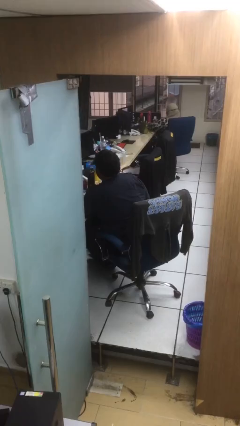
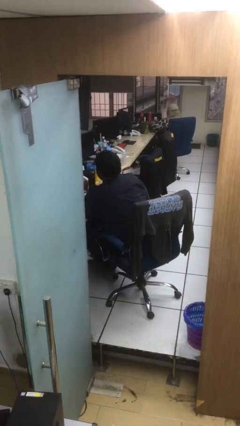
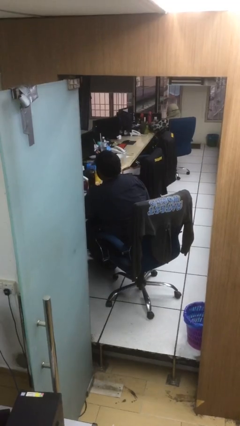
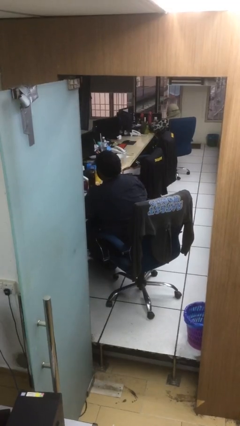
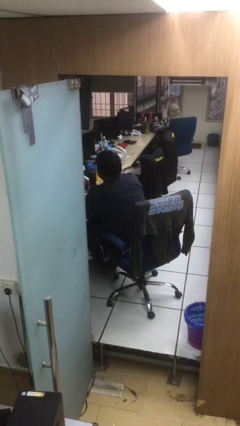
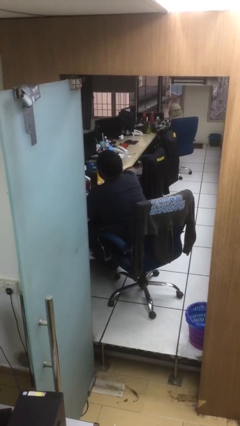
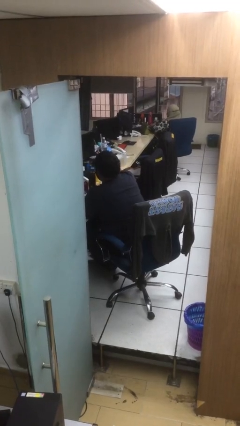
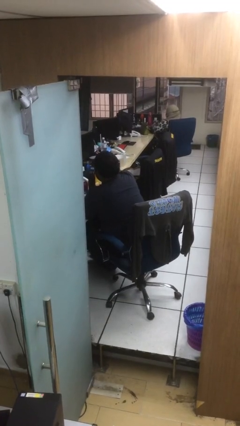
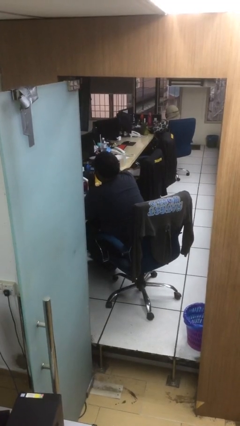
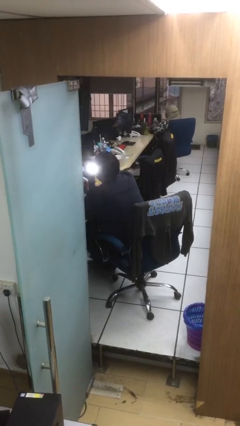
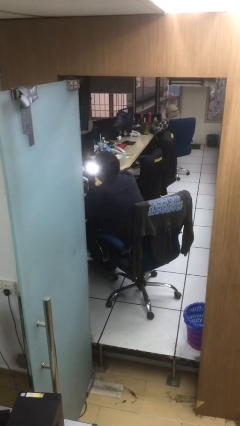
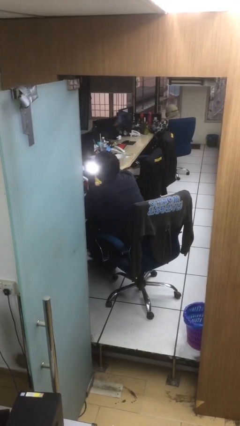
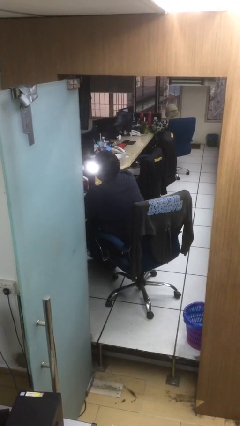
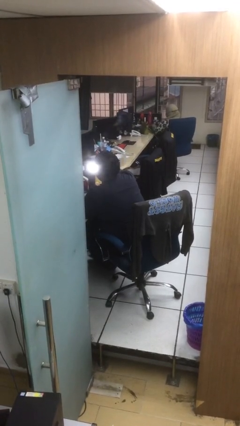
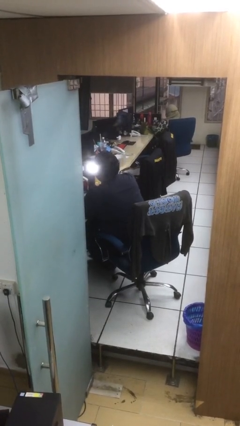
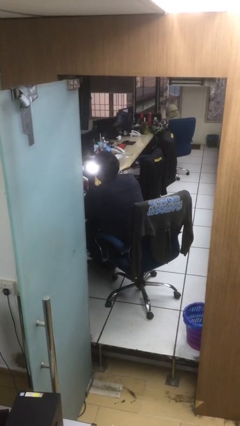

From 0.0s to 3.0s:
person turns on lamp

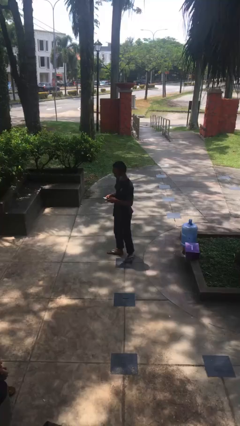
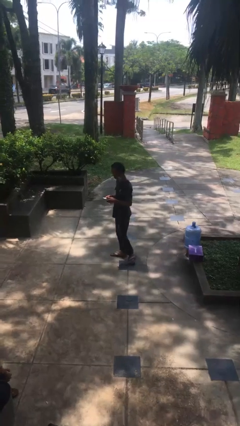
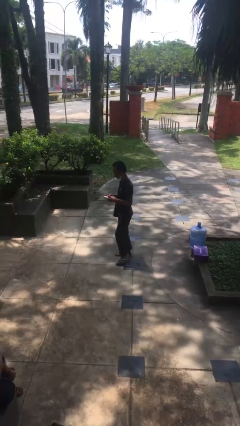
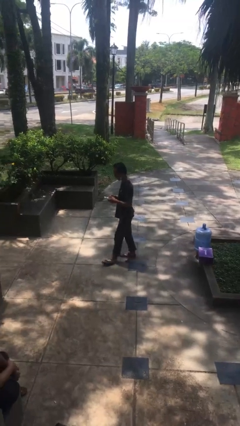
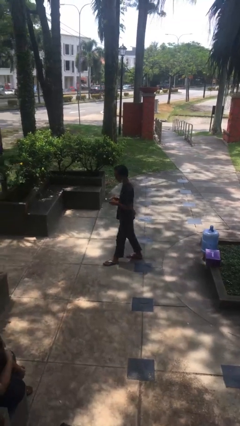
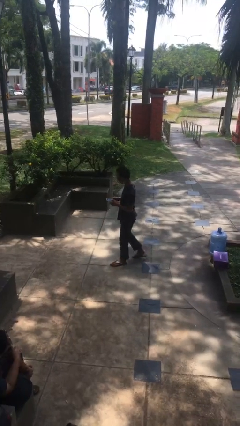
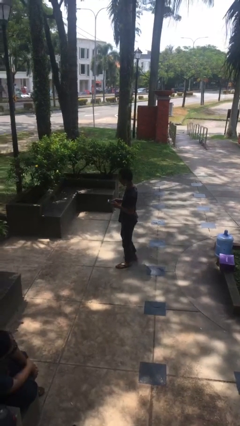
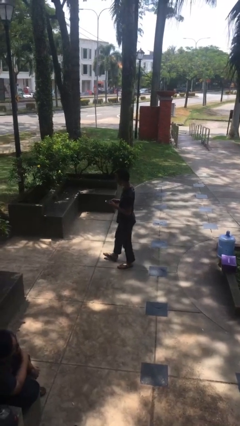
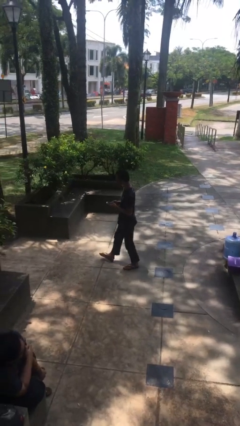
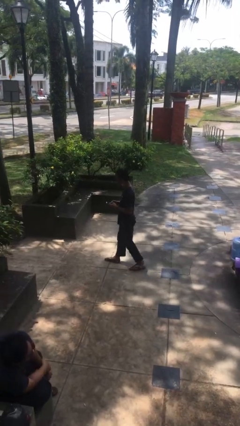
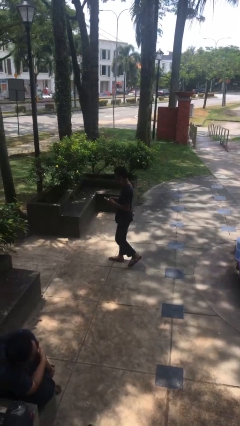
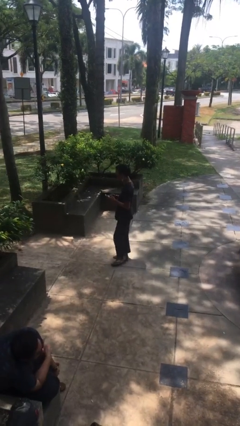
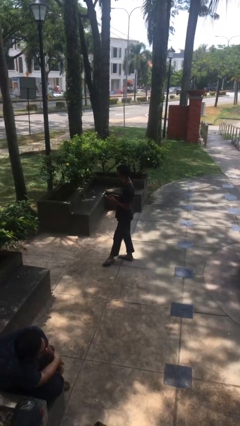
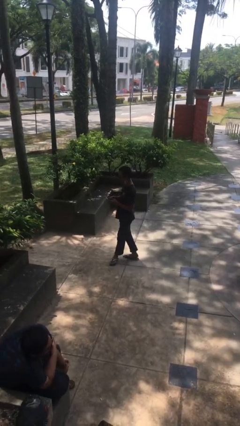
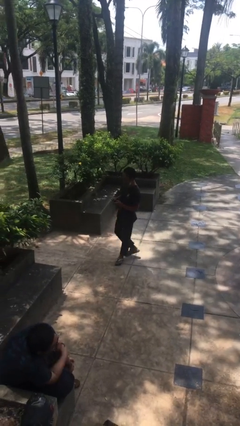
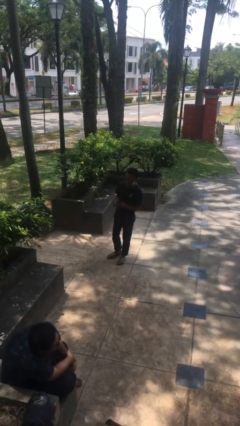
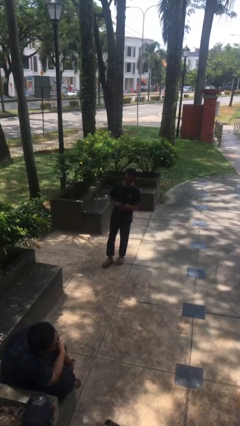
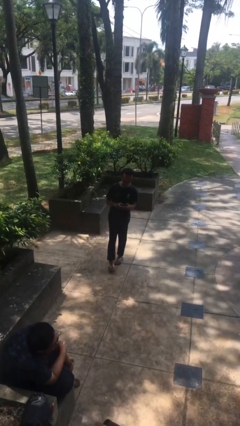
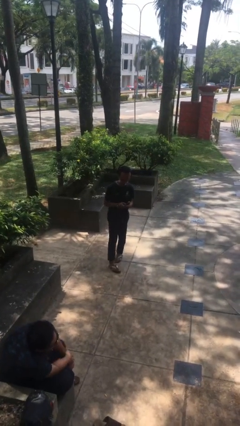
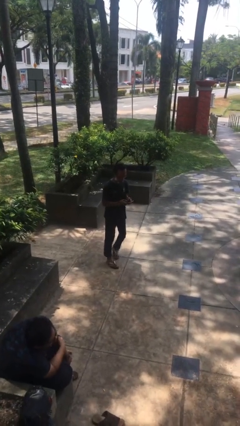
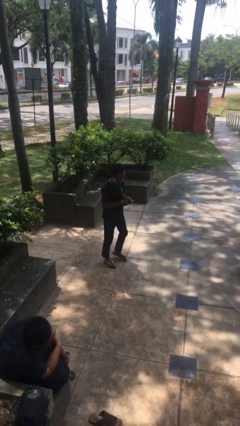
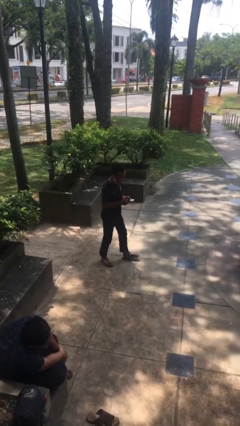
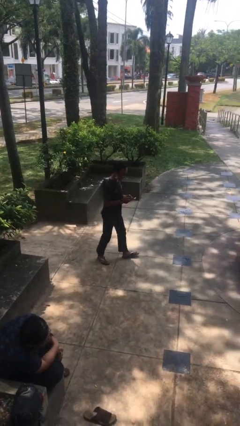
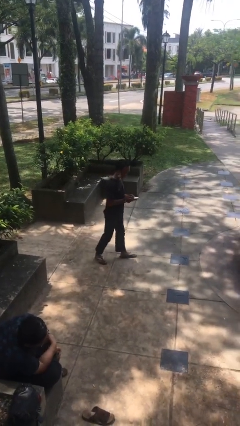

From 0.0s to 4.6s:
person texts on phone

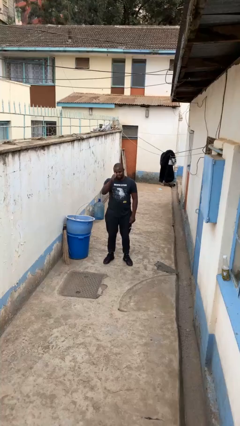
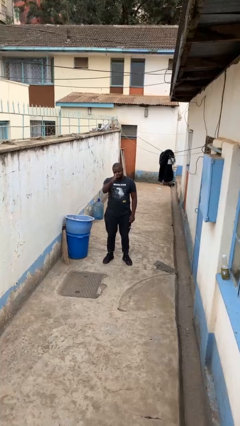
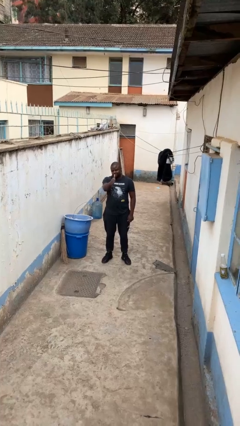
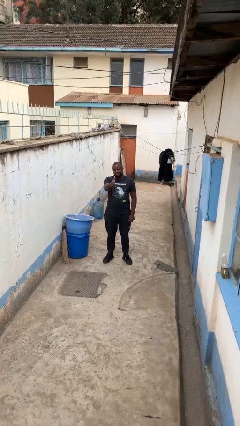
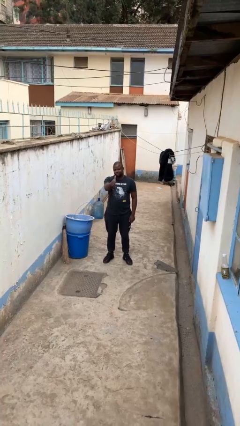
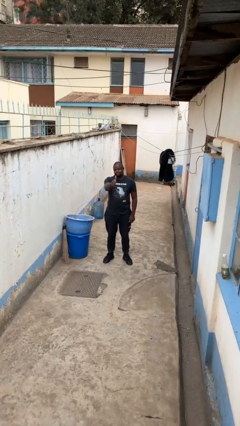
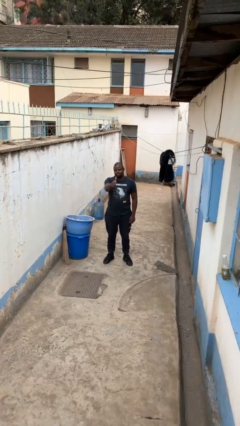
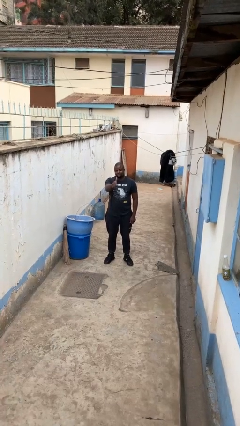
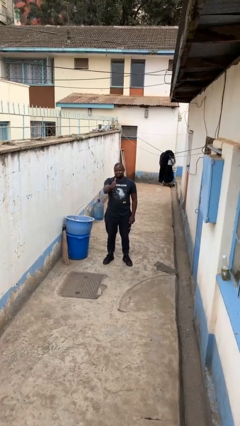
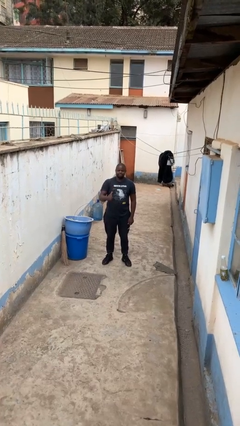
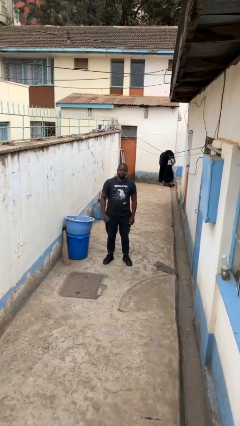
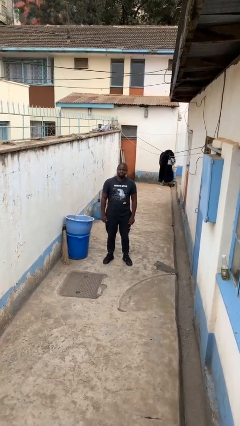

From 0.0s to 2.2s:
person gestures thumbs up

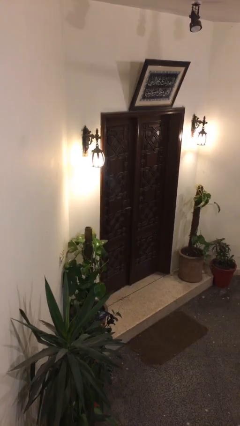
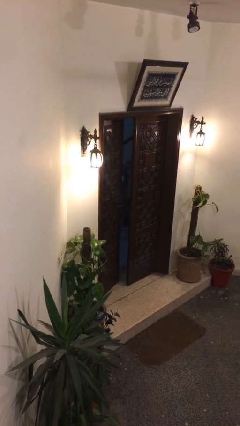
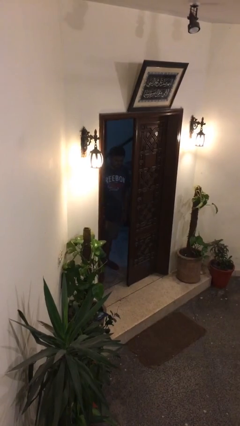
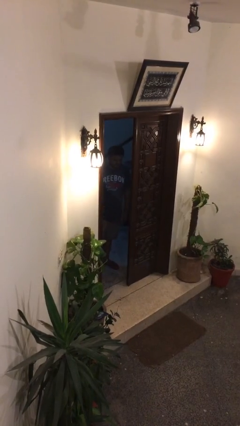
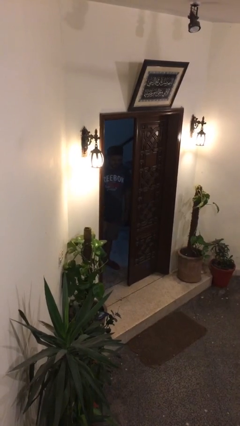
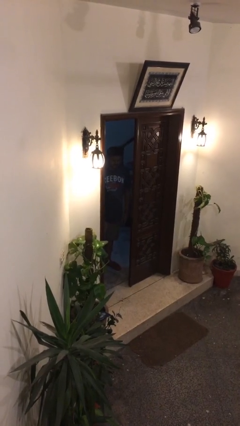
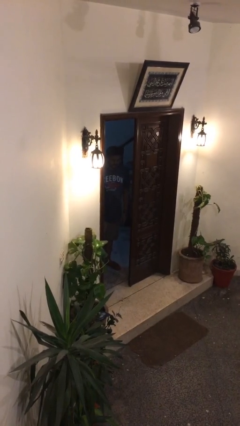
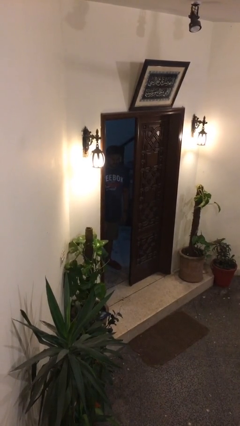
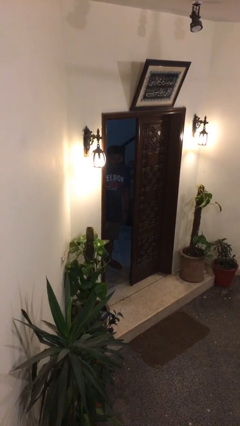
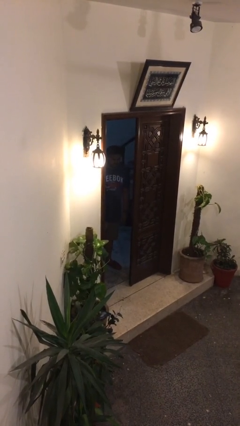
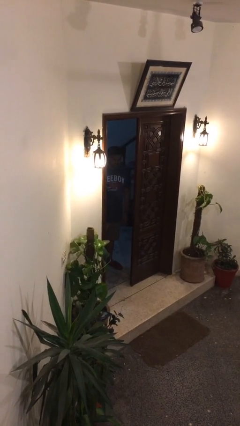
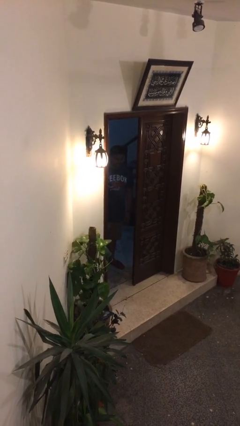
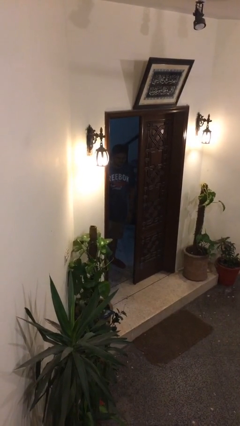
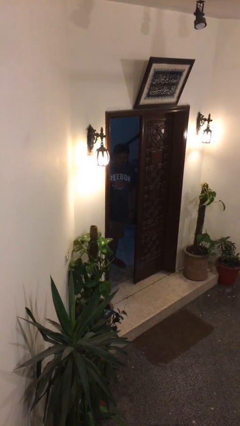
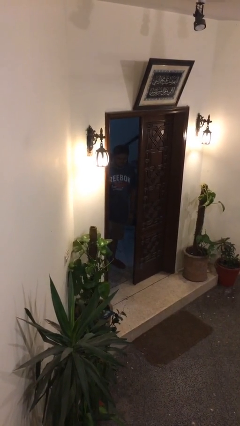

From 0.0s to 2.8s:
person opens facility door

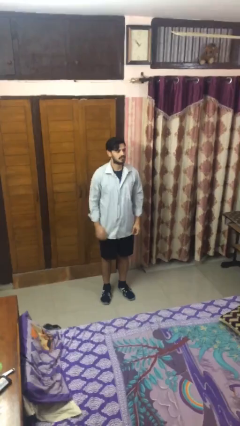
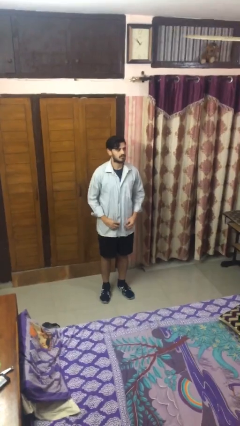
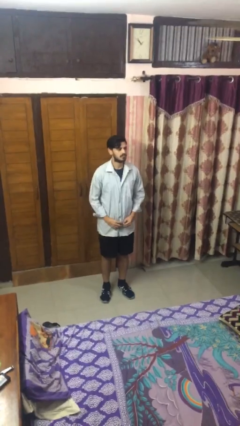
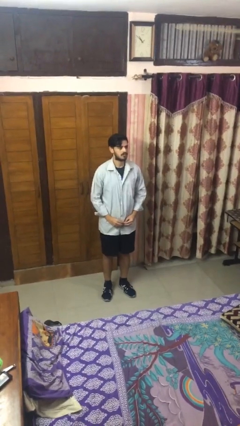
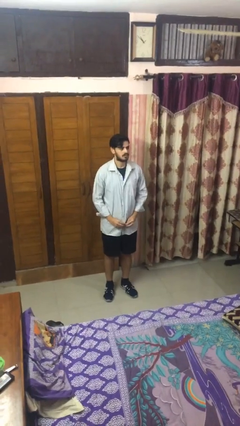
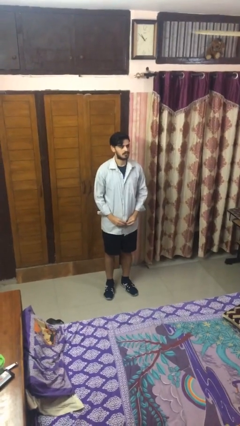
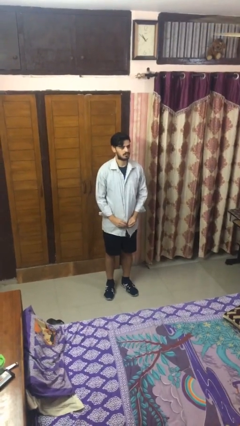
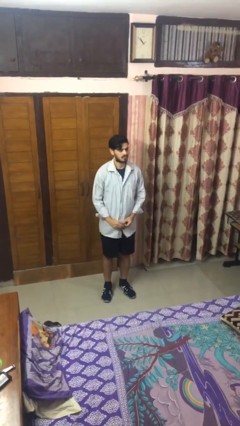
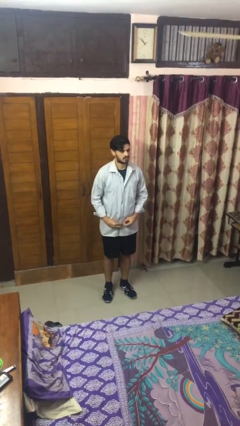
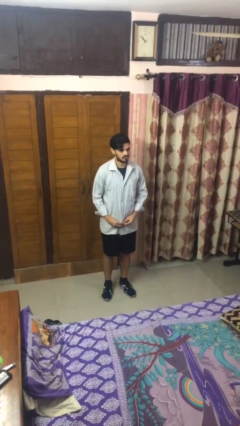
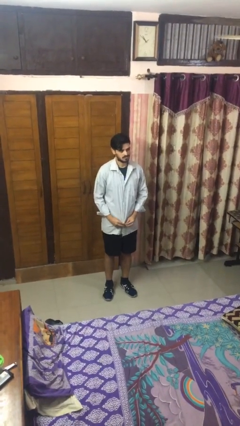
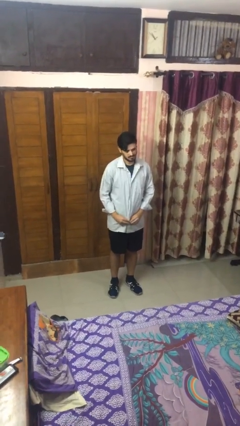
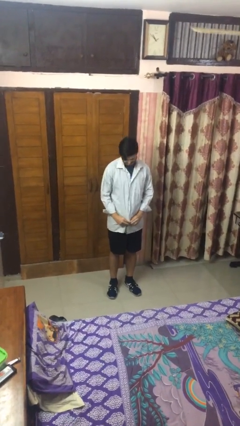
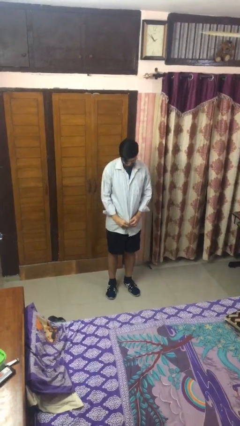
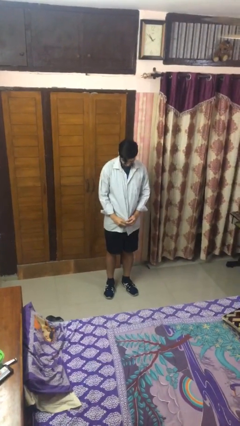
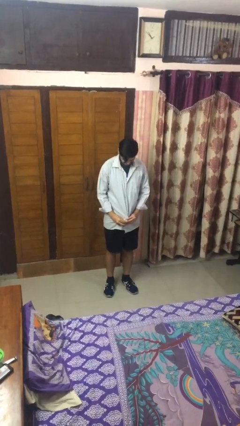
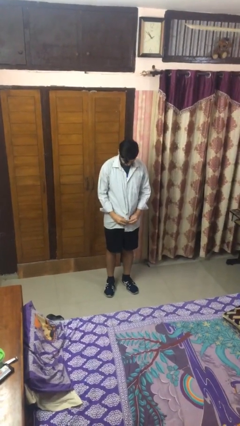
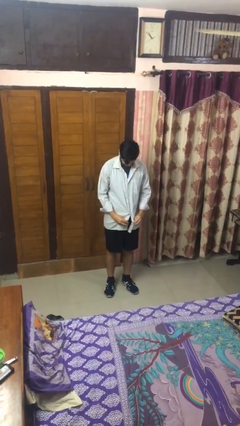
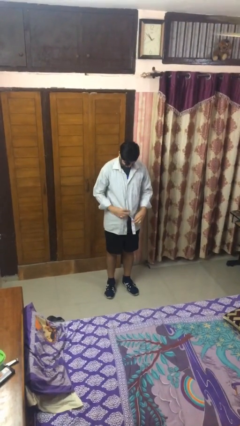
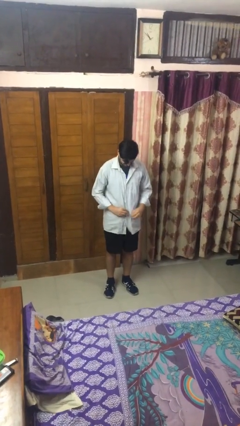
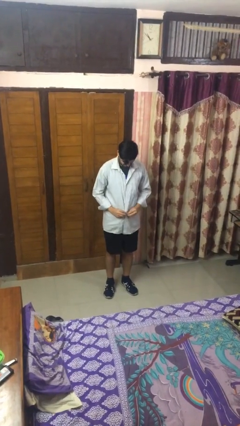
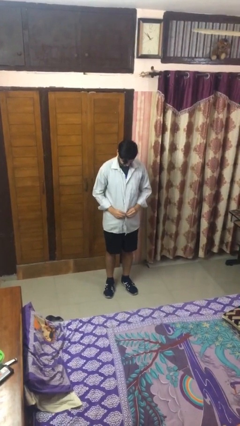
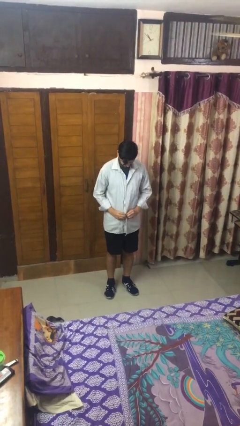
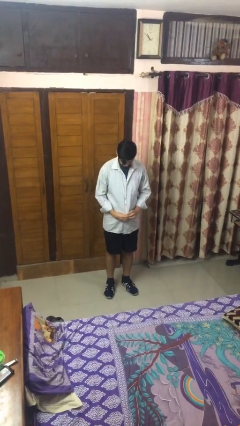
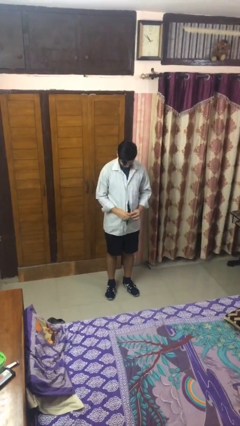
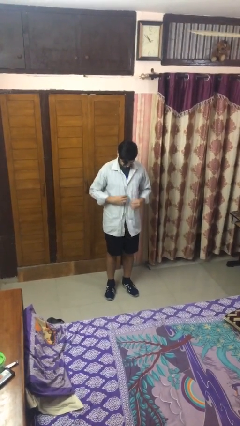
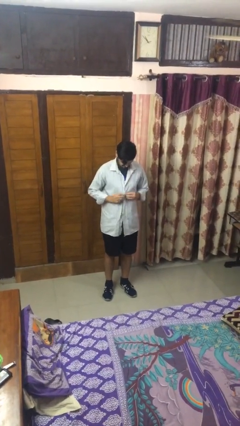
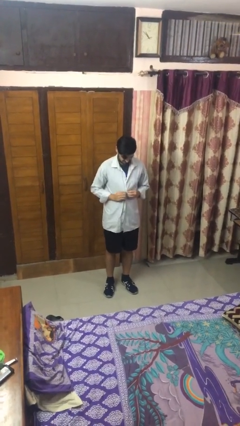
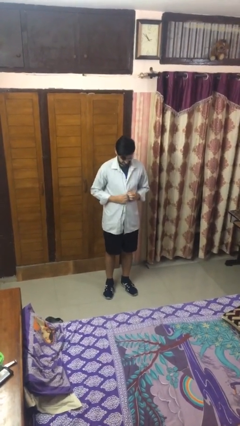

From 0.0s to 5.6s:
person unbuttons shirt
